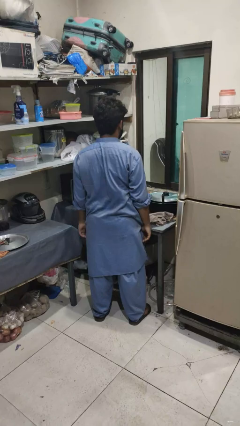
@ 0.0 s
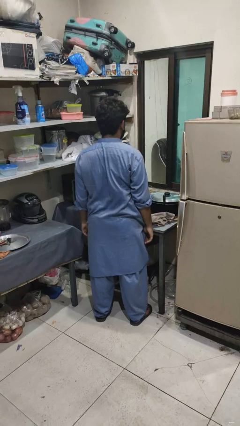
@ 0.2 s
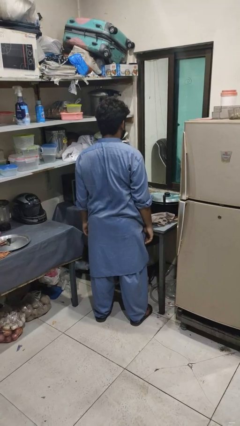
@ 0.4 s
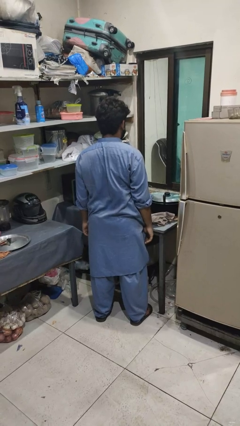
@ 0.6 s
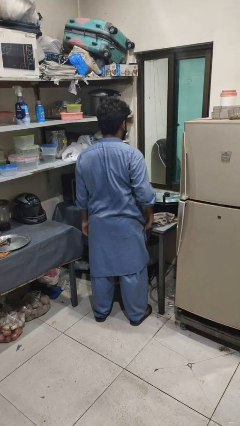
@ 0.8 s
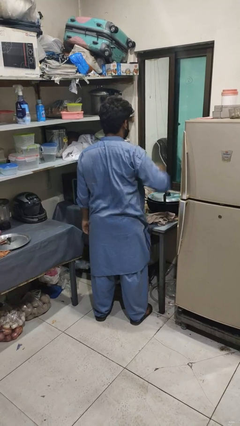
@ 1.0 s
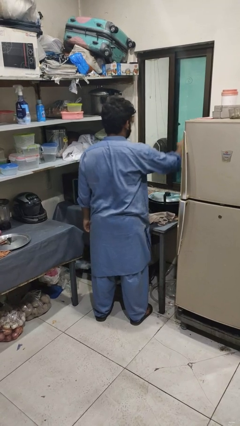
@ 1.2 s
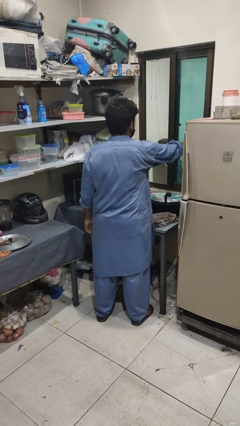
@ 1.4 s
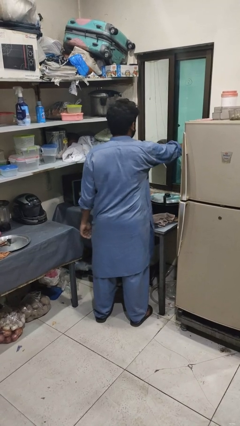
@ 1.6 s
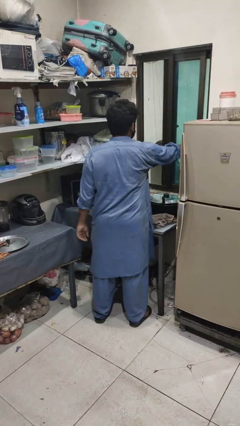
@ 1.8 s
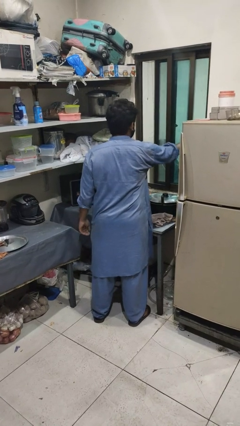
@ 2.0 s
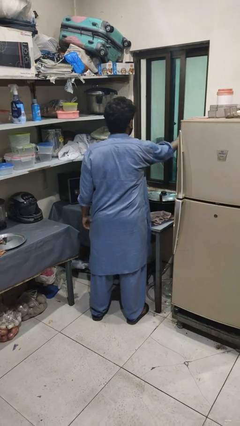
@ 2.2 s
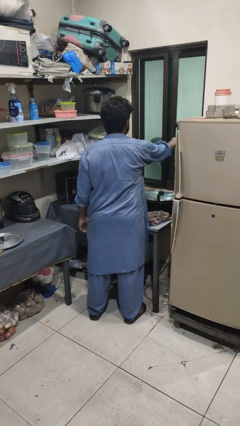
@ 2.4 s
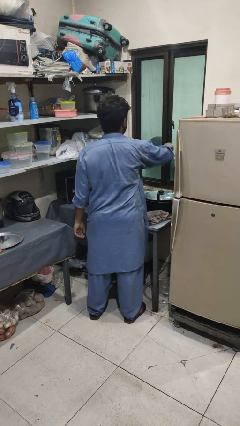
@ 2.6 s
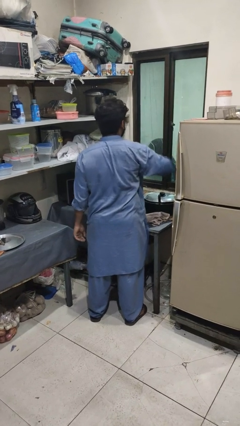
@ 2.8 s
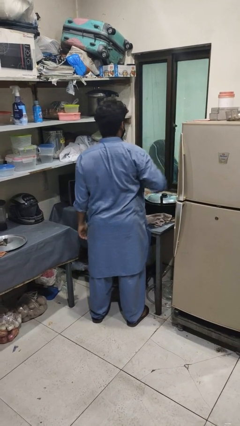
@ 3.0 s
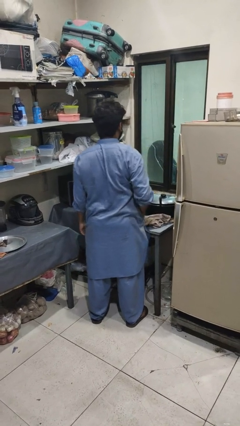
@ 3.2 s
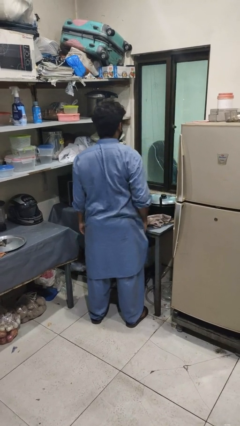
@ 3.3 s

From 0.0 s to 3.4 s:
person closes home window

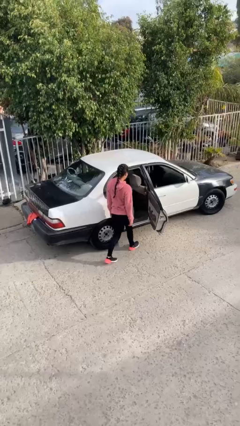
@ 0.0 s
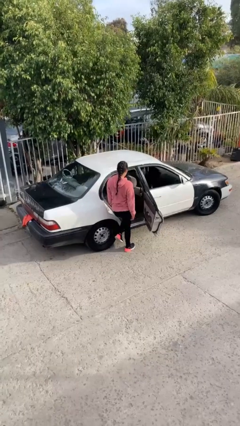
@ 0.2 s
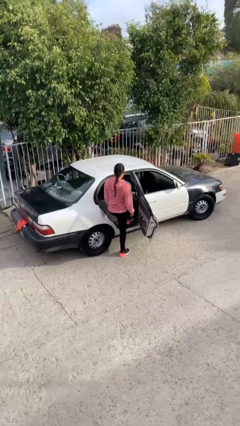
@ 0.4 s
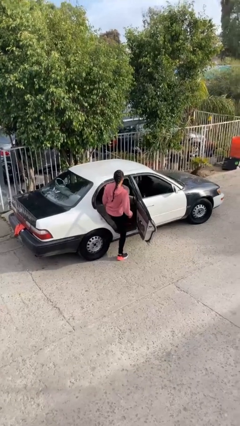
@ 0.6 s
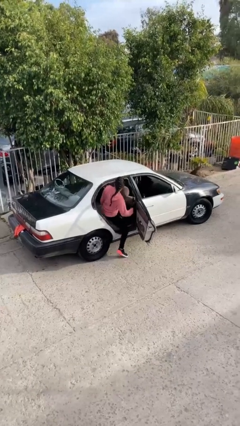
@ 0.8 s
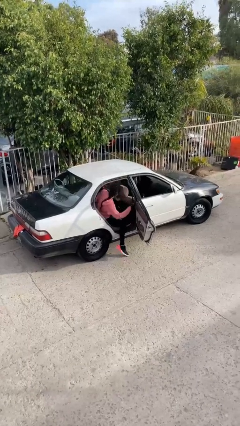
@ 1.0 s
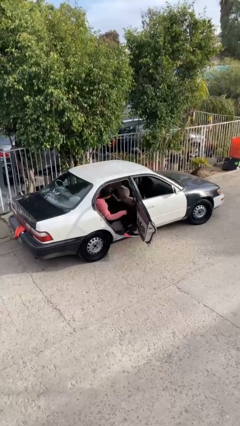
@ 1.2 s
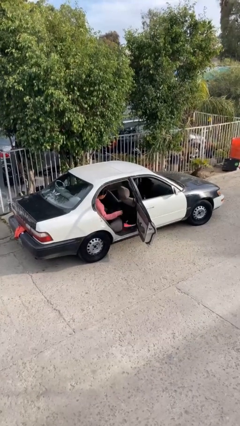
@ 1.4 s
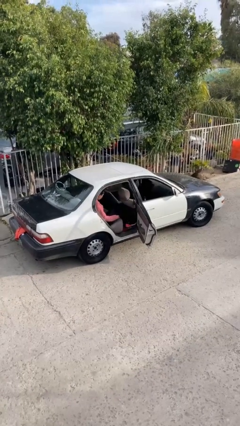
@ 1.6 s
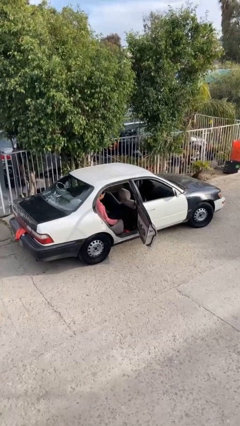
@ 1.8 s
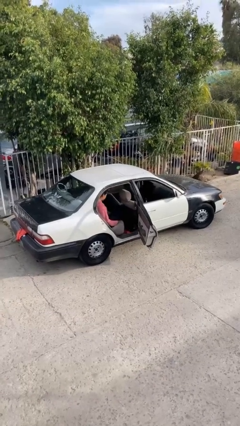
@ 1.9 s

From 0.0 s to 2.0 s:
person enters car

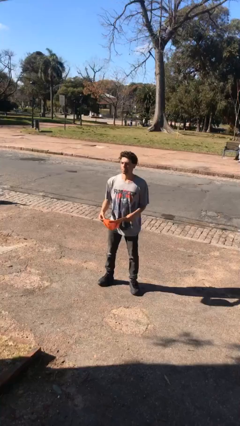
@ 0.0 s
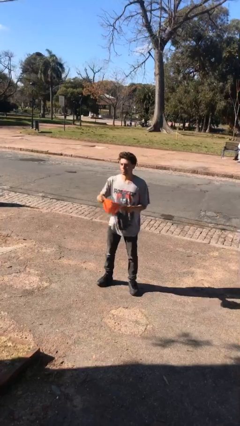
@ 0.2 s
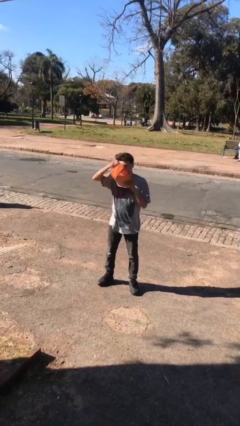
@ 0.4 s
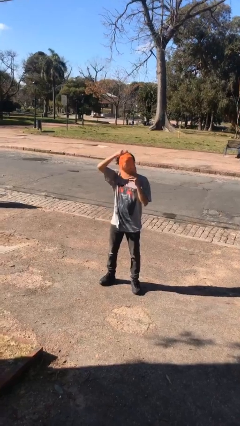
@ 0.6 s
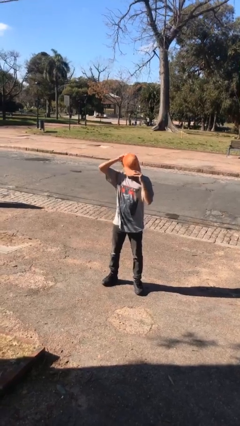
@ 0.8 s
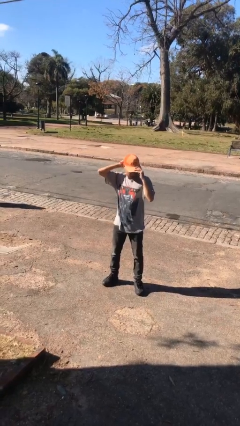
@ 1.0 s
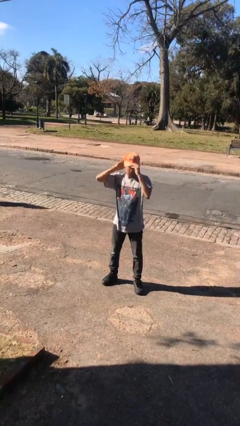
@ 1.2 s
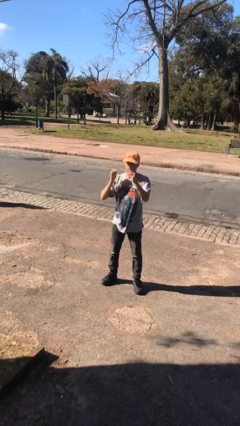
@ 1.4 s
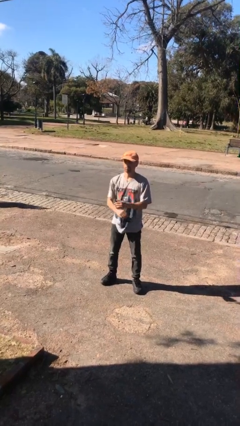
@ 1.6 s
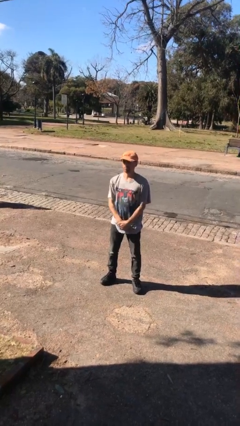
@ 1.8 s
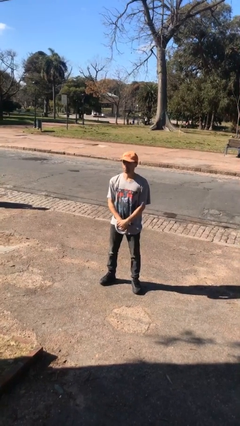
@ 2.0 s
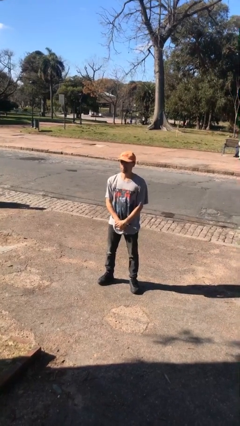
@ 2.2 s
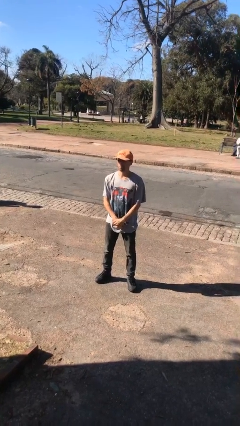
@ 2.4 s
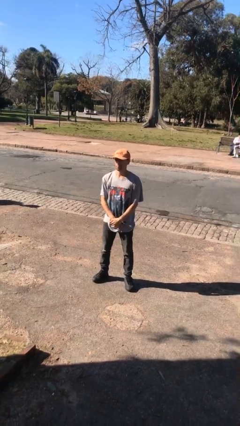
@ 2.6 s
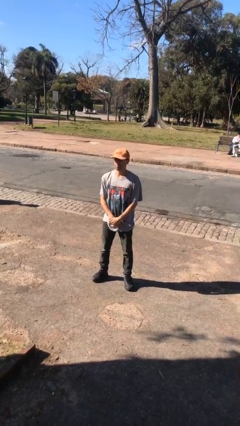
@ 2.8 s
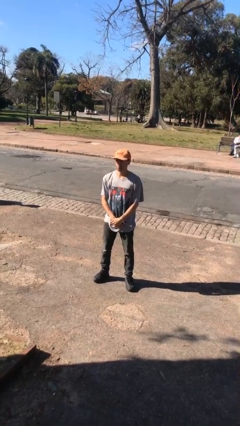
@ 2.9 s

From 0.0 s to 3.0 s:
person puts on hat

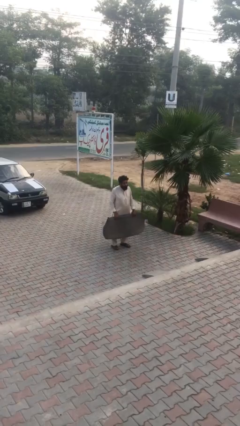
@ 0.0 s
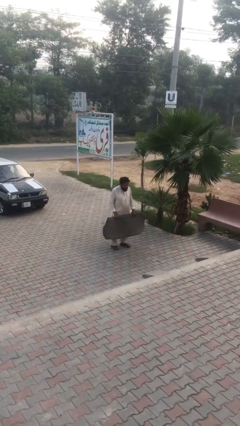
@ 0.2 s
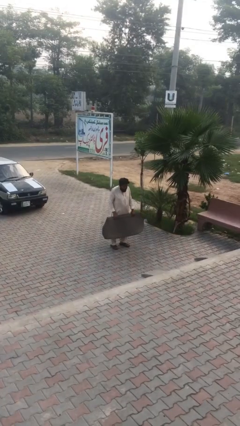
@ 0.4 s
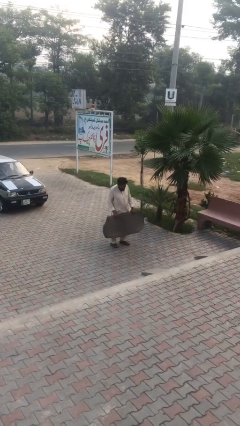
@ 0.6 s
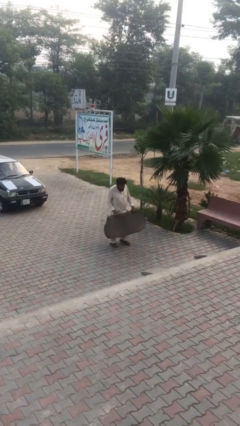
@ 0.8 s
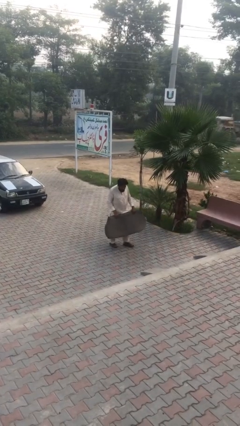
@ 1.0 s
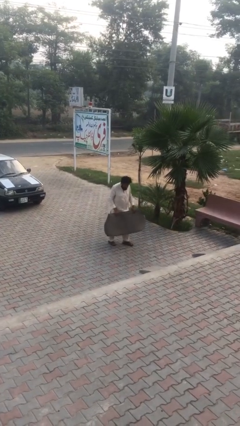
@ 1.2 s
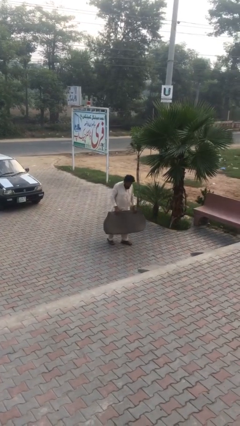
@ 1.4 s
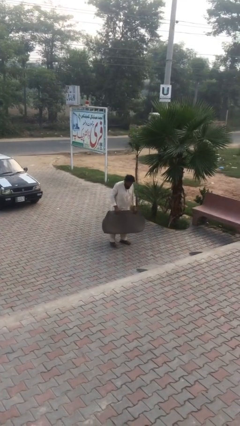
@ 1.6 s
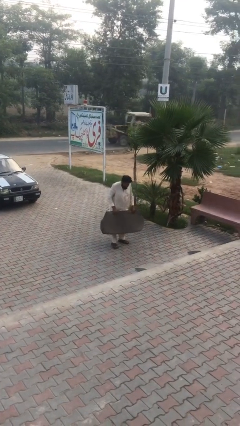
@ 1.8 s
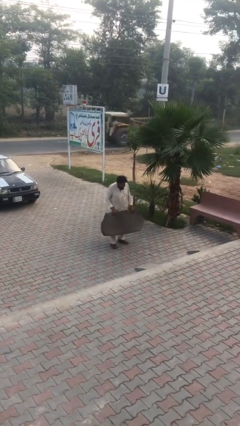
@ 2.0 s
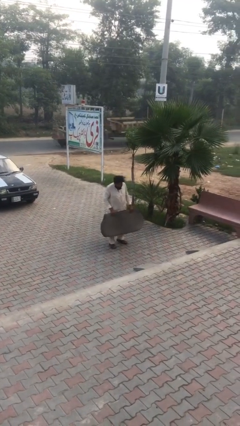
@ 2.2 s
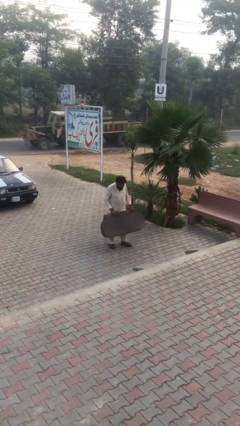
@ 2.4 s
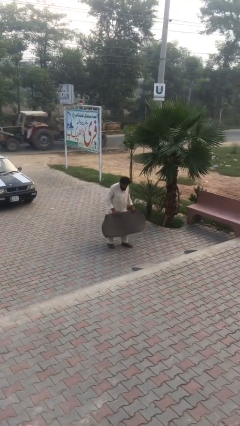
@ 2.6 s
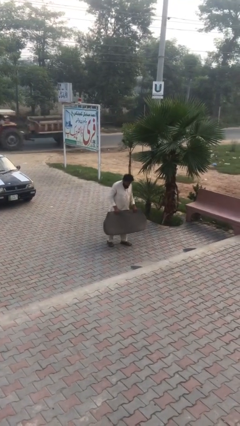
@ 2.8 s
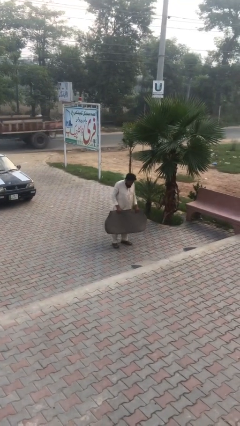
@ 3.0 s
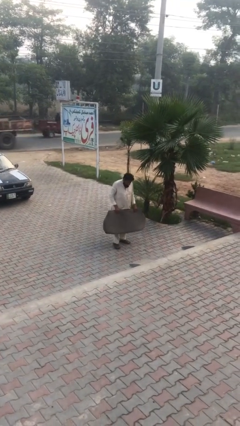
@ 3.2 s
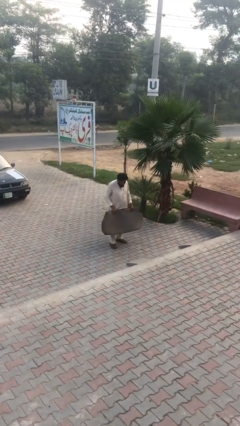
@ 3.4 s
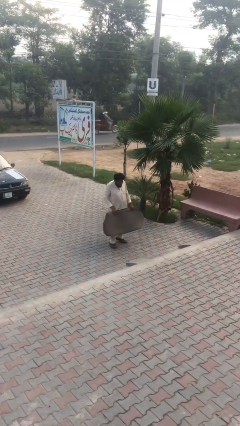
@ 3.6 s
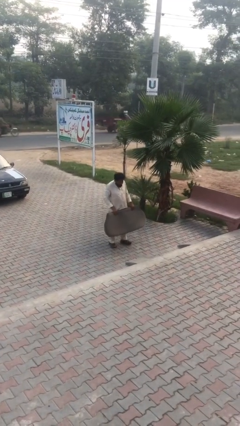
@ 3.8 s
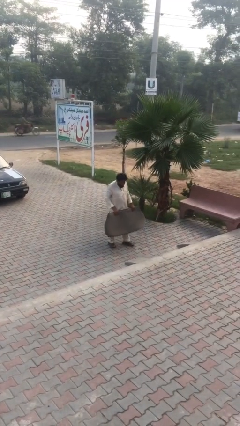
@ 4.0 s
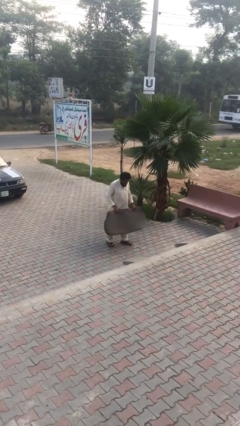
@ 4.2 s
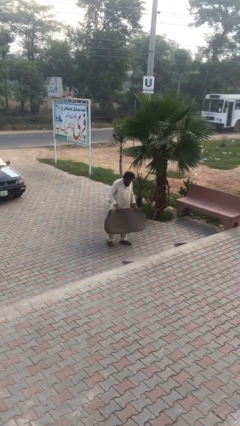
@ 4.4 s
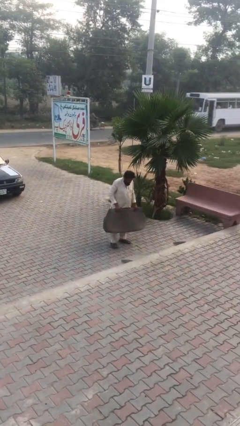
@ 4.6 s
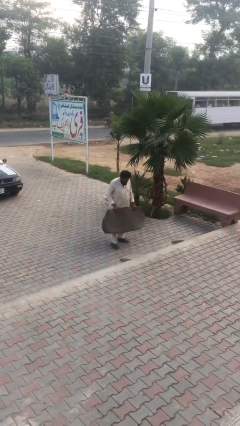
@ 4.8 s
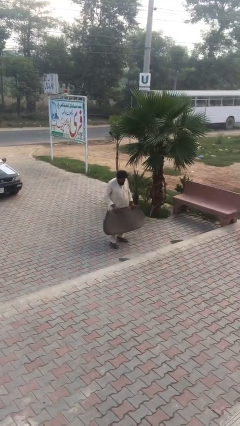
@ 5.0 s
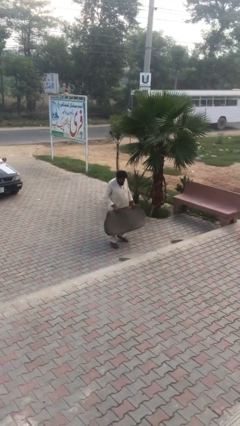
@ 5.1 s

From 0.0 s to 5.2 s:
person carries heavy object

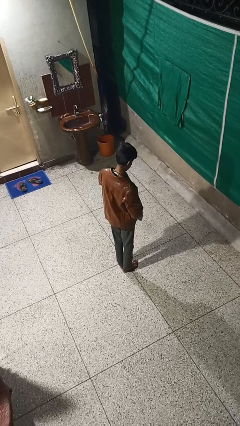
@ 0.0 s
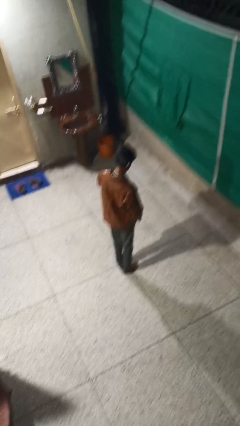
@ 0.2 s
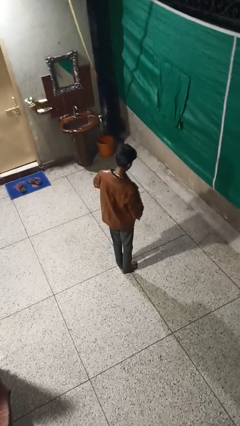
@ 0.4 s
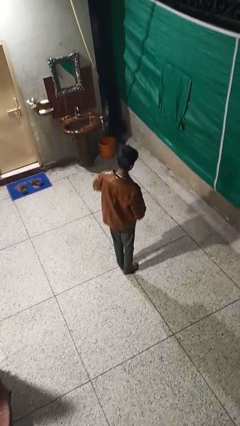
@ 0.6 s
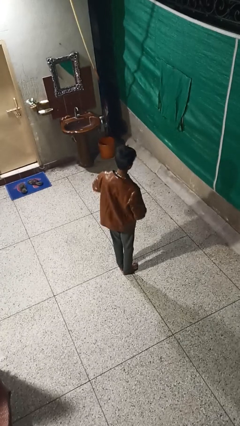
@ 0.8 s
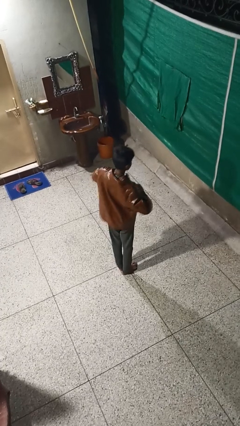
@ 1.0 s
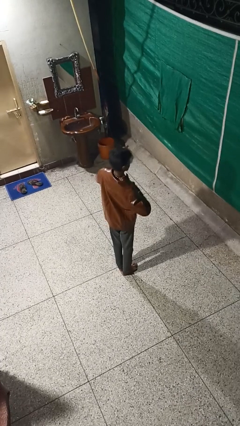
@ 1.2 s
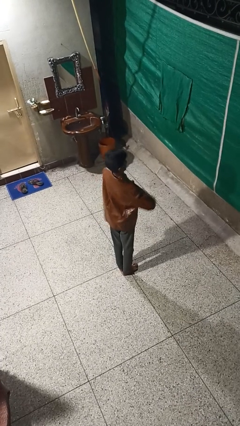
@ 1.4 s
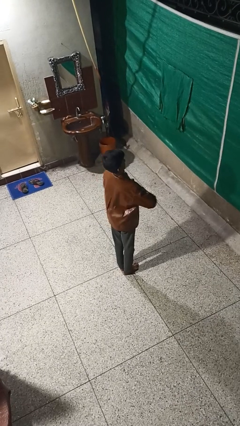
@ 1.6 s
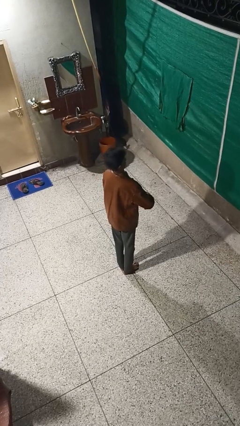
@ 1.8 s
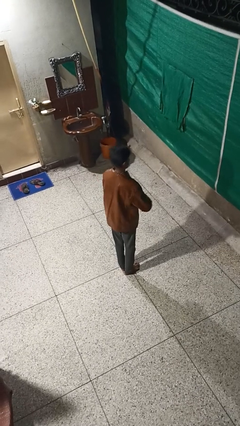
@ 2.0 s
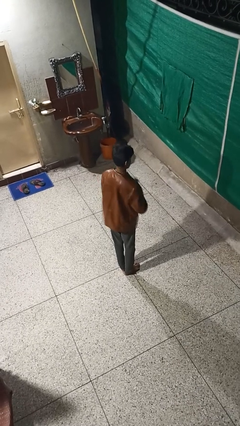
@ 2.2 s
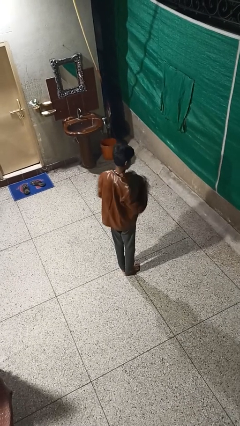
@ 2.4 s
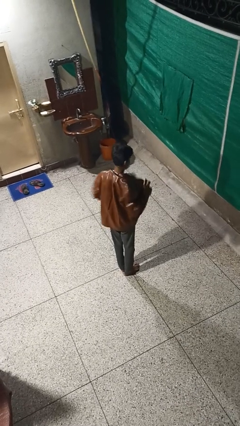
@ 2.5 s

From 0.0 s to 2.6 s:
person unzips jacket

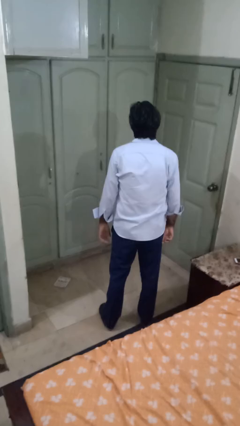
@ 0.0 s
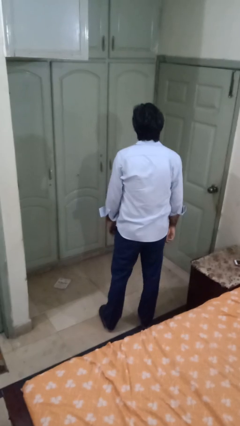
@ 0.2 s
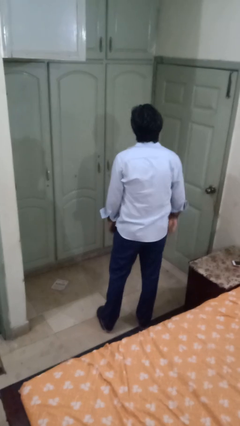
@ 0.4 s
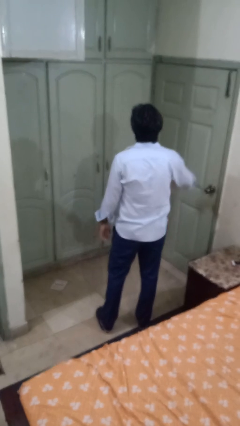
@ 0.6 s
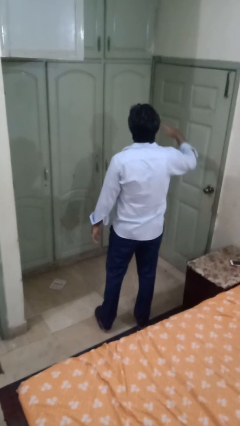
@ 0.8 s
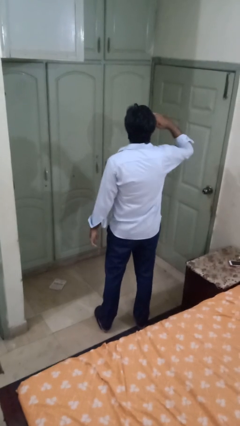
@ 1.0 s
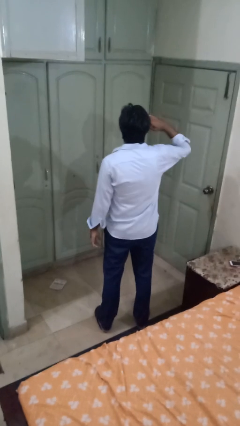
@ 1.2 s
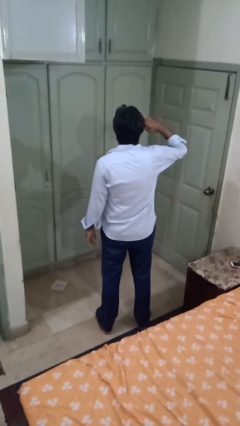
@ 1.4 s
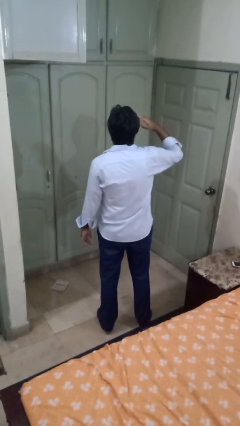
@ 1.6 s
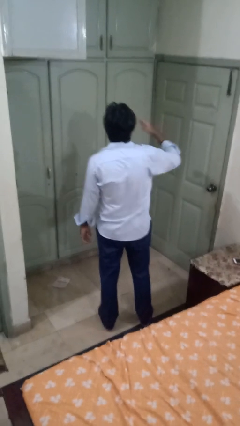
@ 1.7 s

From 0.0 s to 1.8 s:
person salutes
